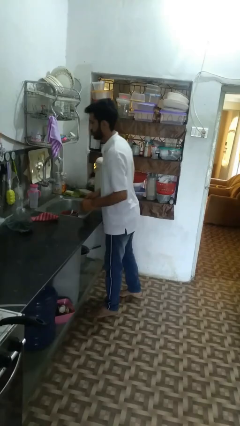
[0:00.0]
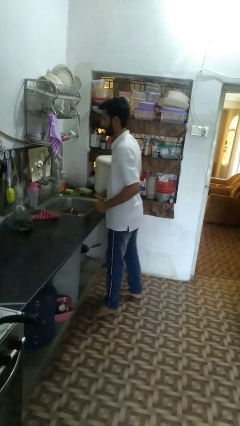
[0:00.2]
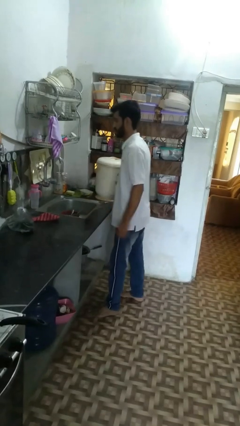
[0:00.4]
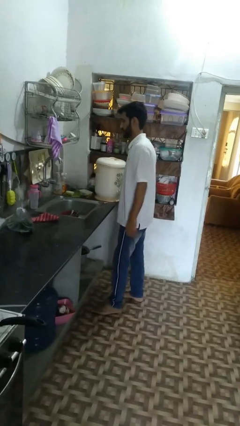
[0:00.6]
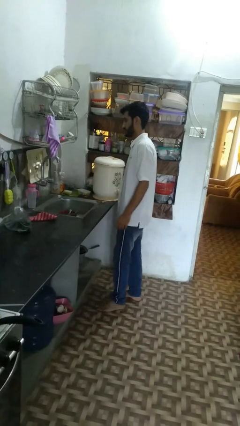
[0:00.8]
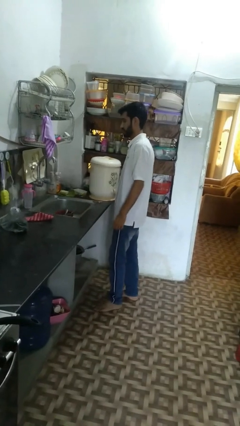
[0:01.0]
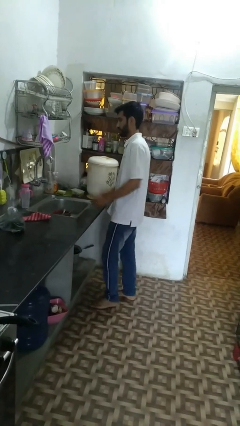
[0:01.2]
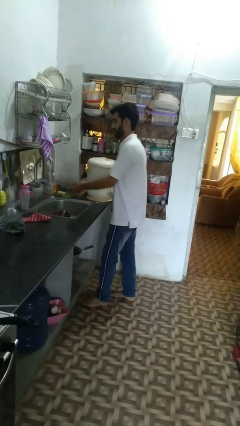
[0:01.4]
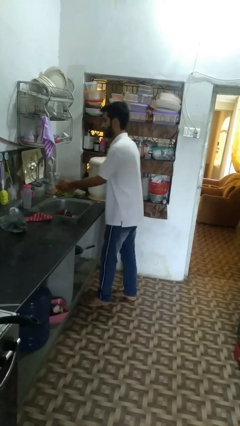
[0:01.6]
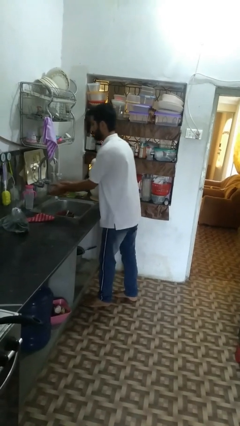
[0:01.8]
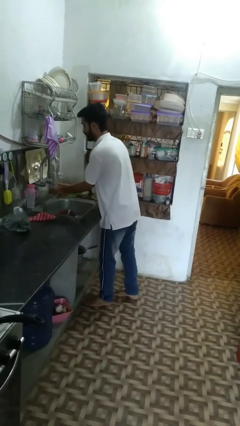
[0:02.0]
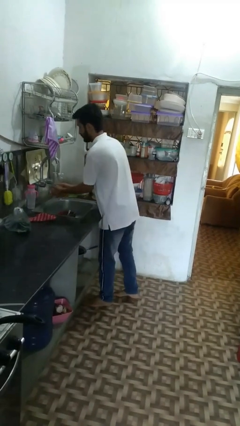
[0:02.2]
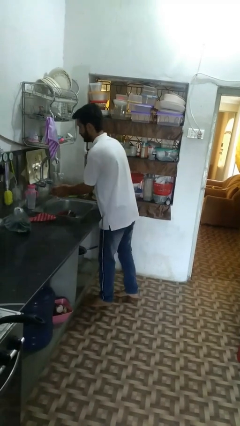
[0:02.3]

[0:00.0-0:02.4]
person washes hands

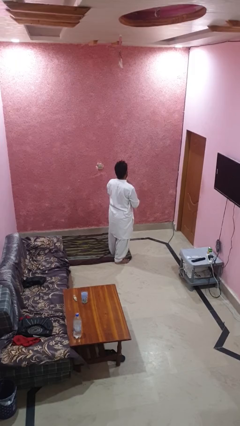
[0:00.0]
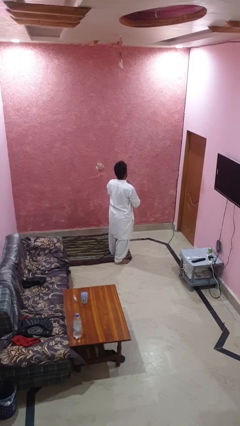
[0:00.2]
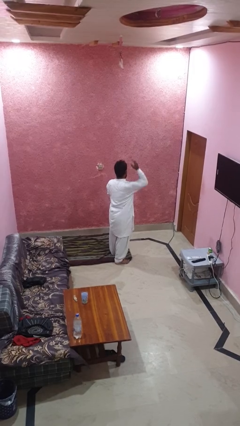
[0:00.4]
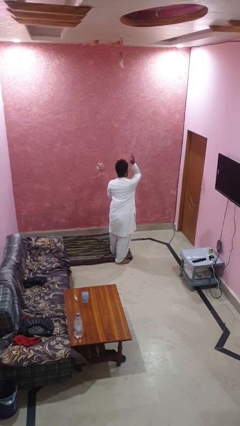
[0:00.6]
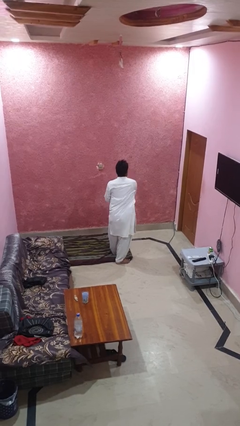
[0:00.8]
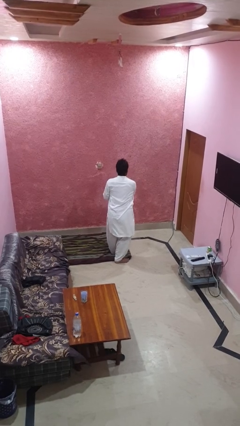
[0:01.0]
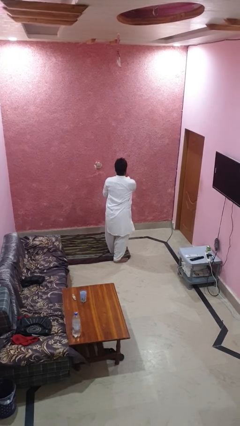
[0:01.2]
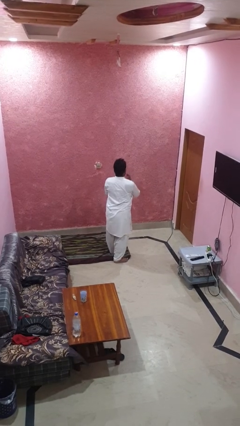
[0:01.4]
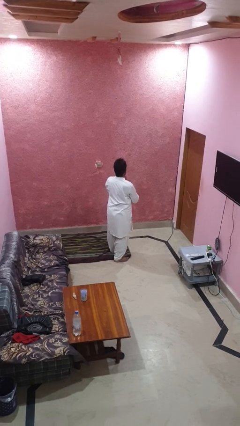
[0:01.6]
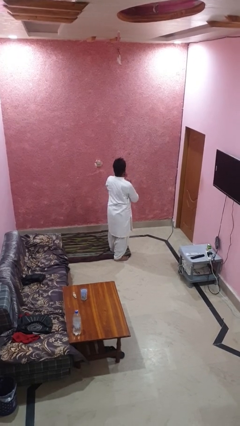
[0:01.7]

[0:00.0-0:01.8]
person karate chop

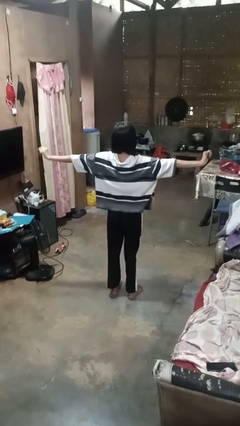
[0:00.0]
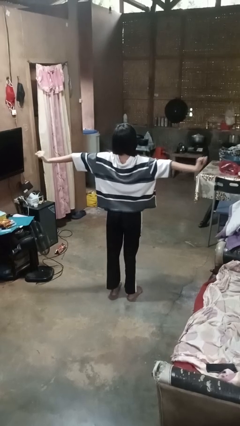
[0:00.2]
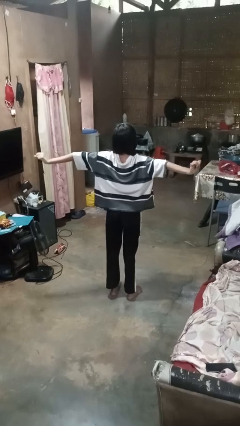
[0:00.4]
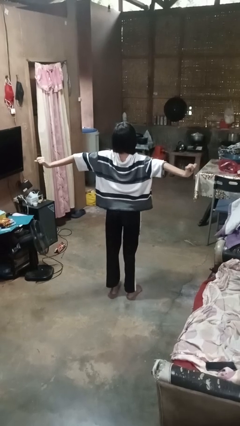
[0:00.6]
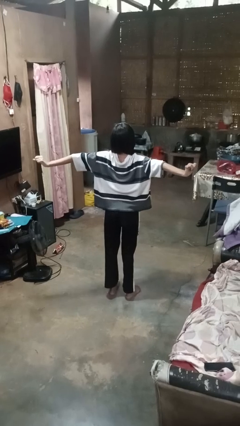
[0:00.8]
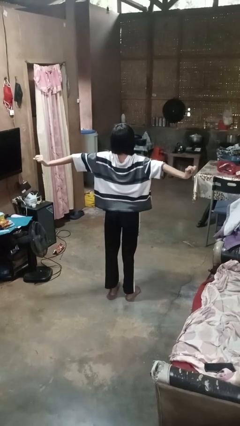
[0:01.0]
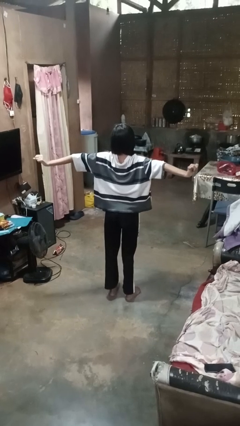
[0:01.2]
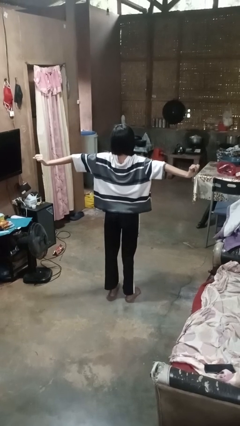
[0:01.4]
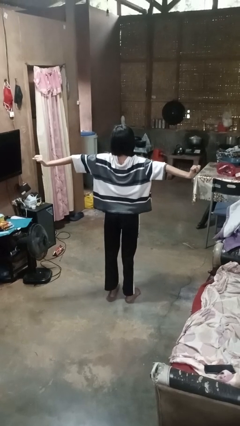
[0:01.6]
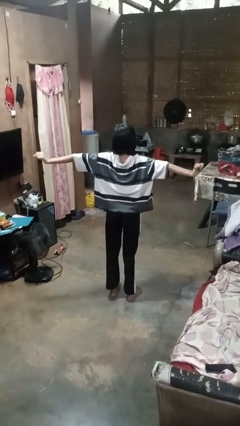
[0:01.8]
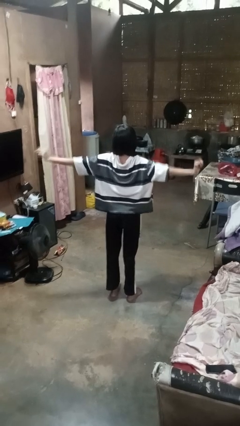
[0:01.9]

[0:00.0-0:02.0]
person stretches arms to side

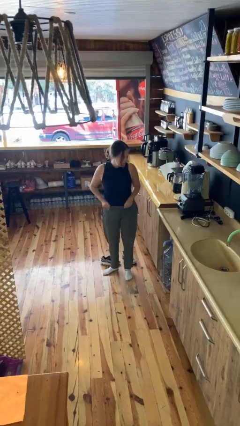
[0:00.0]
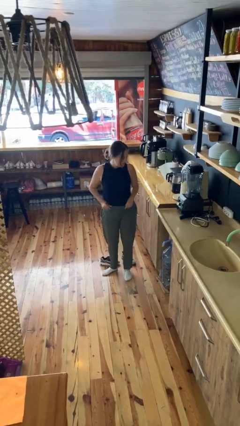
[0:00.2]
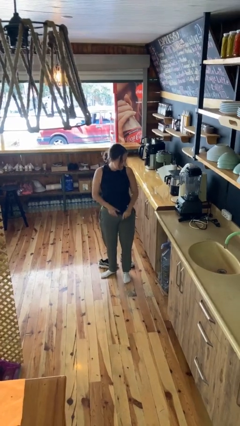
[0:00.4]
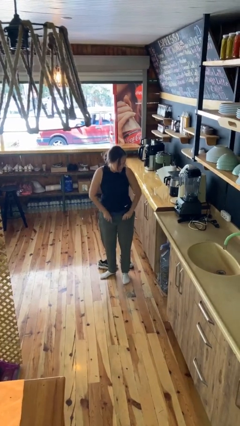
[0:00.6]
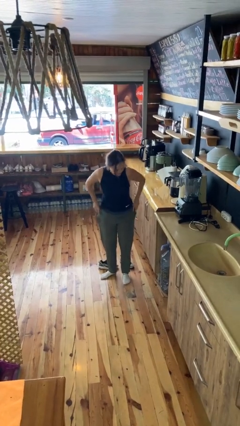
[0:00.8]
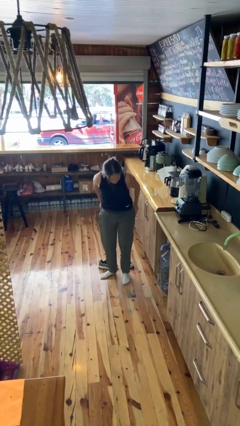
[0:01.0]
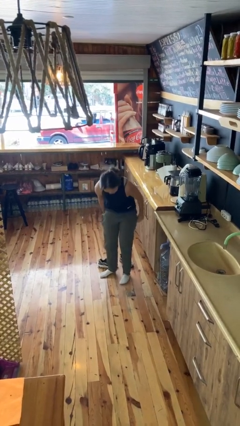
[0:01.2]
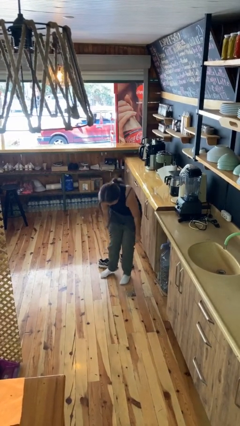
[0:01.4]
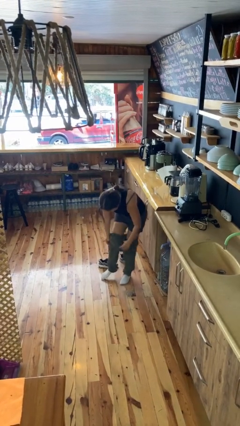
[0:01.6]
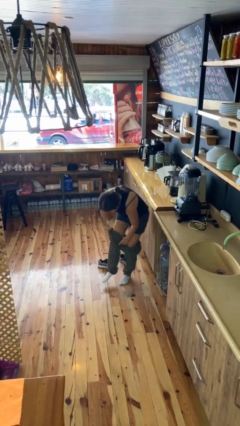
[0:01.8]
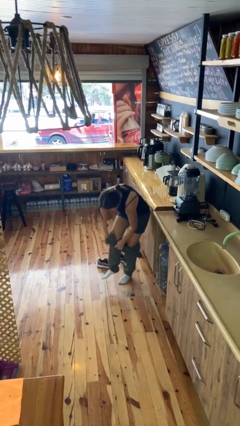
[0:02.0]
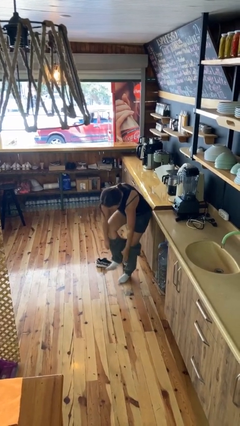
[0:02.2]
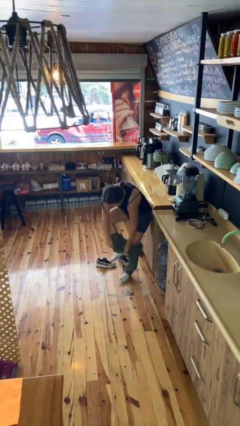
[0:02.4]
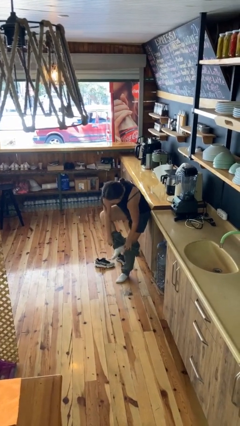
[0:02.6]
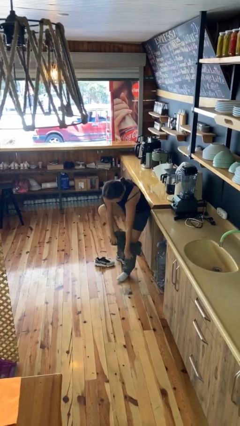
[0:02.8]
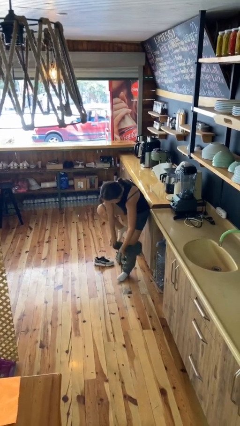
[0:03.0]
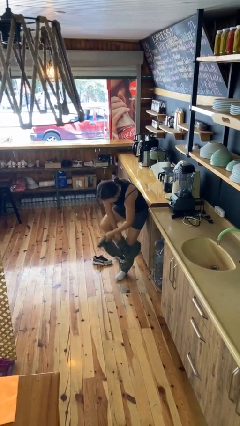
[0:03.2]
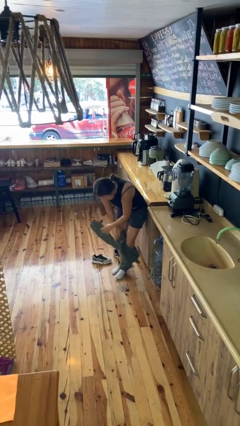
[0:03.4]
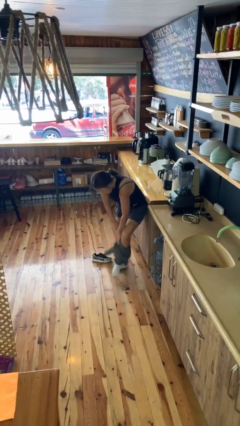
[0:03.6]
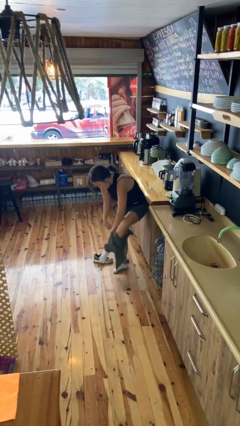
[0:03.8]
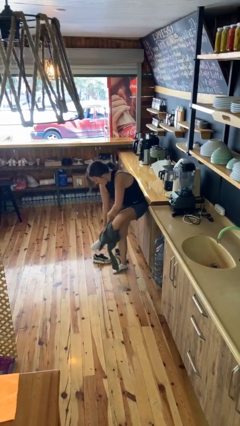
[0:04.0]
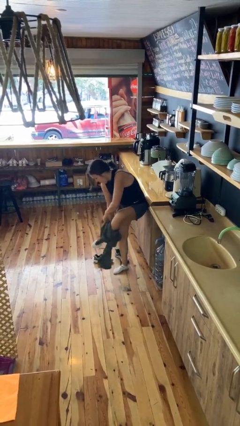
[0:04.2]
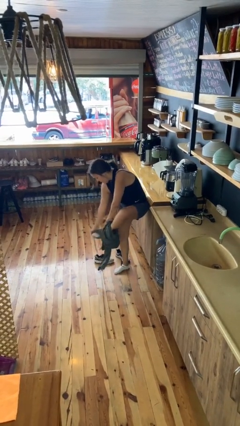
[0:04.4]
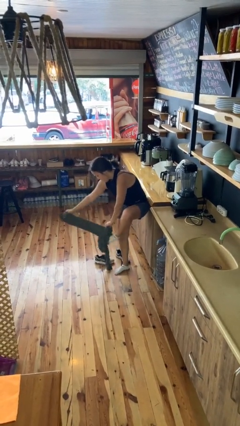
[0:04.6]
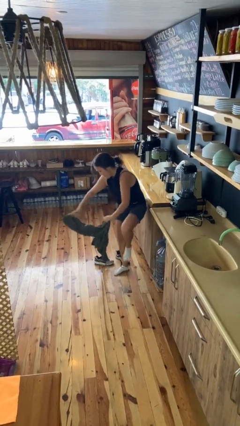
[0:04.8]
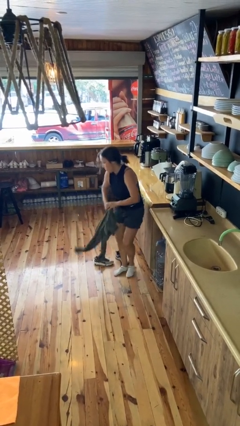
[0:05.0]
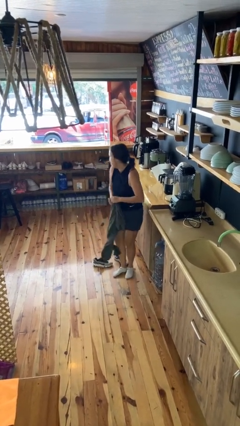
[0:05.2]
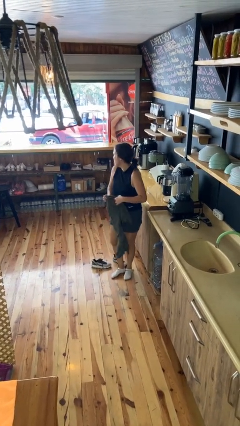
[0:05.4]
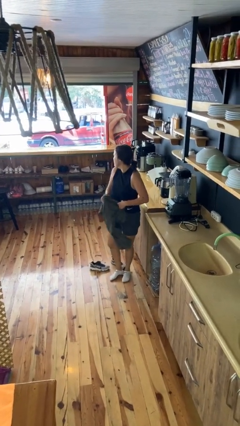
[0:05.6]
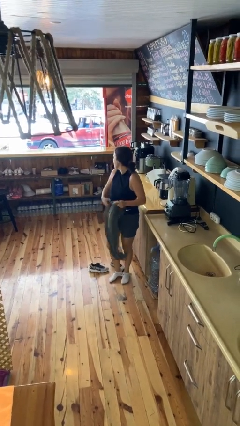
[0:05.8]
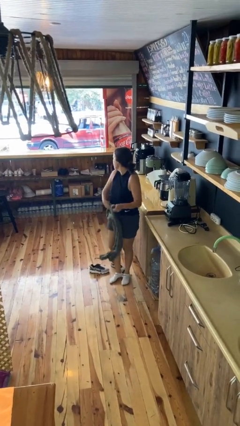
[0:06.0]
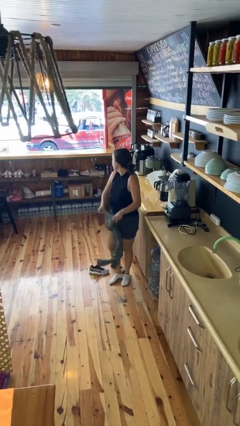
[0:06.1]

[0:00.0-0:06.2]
person takes off pants

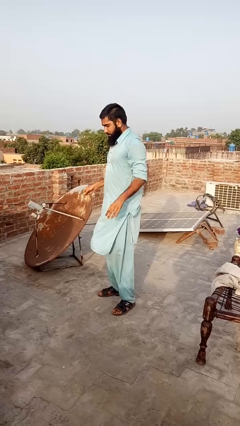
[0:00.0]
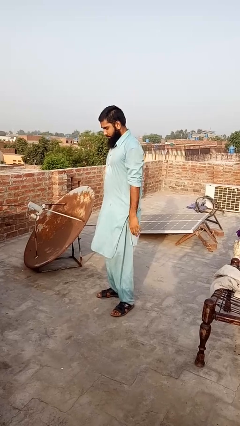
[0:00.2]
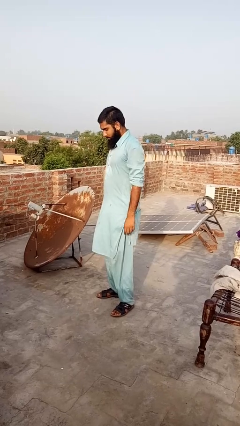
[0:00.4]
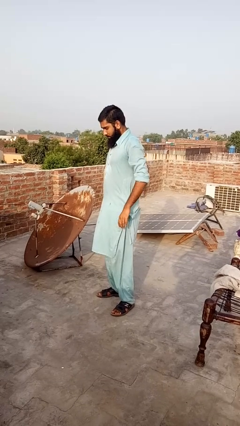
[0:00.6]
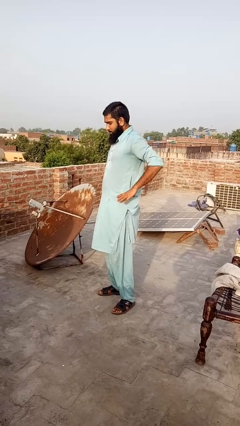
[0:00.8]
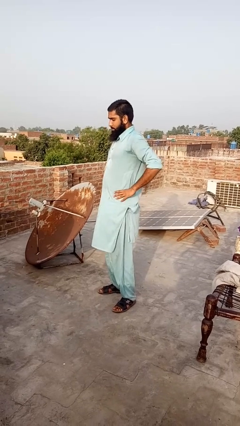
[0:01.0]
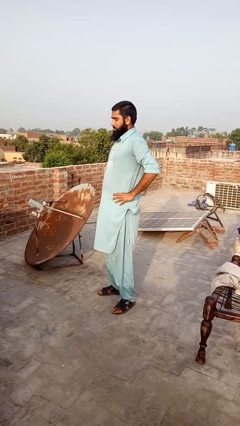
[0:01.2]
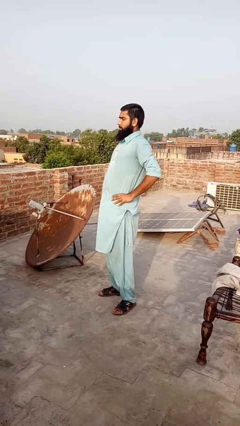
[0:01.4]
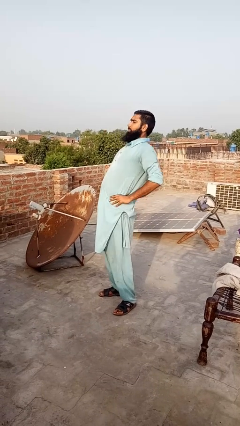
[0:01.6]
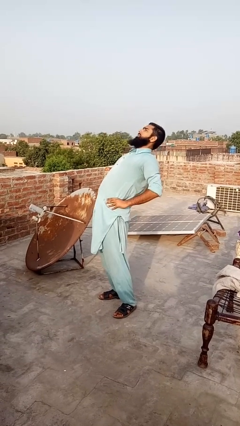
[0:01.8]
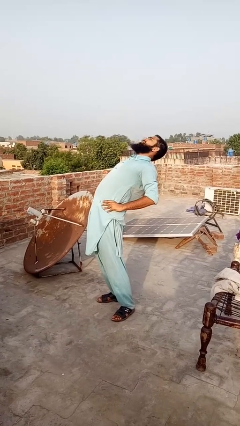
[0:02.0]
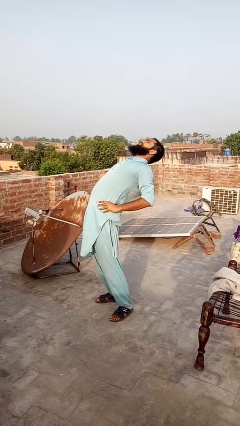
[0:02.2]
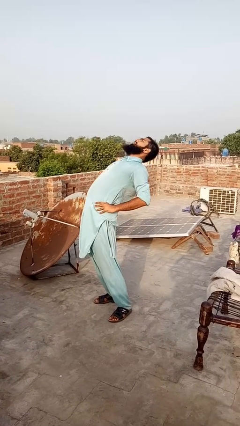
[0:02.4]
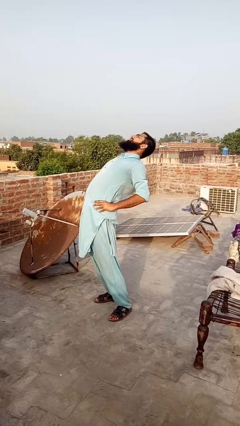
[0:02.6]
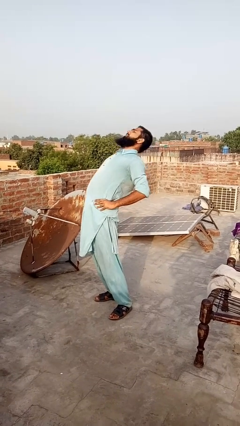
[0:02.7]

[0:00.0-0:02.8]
person stretches back

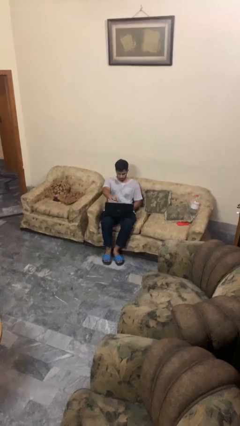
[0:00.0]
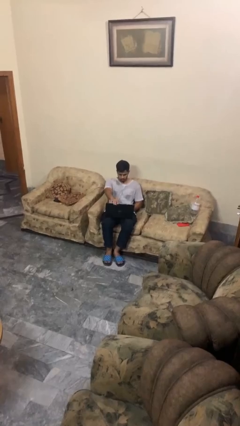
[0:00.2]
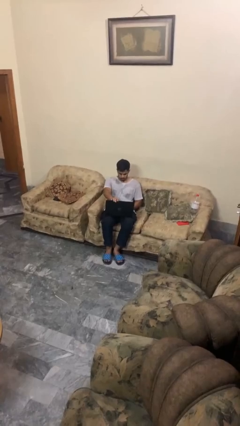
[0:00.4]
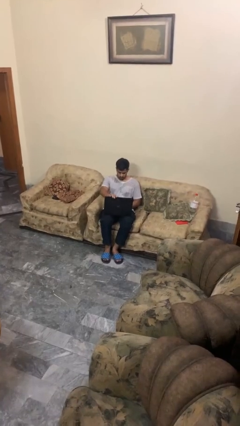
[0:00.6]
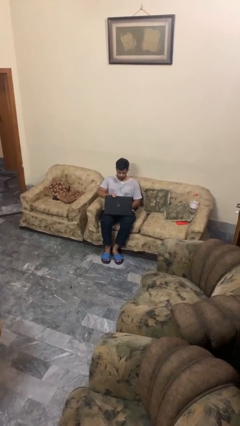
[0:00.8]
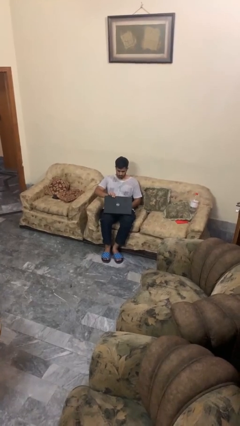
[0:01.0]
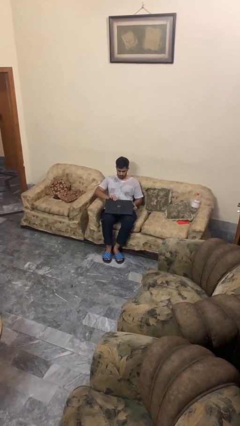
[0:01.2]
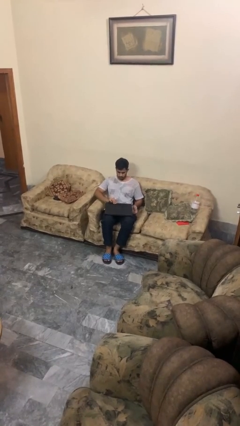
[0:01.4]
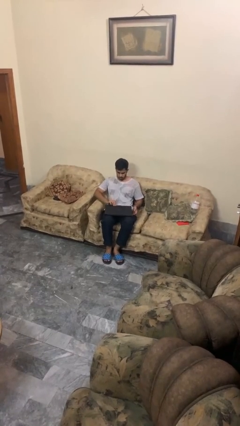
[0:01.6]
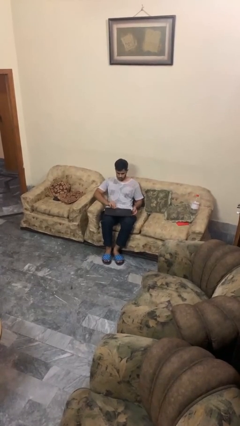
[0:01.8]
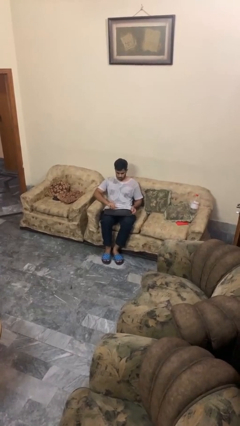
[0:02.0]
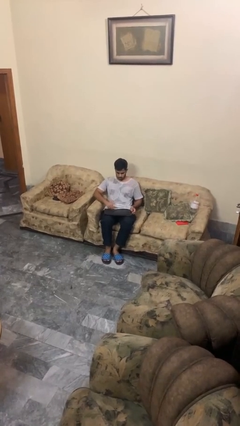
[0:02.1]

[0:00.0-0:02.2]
person closes laptop

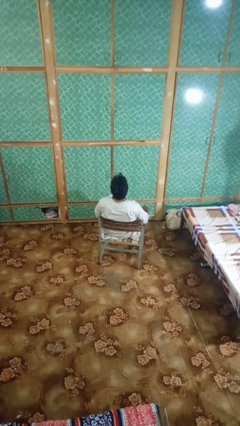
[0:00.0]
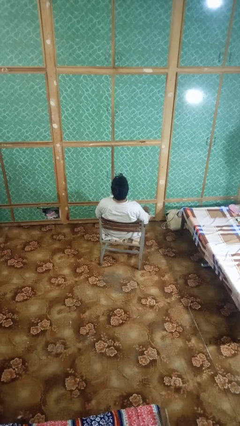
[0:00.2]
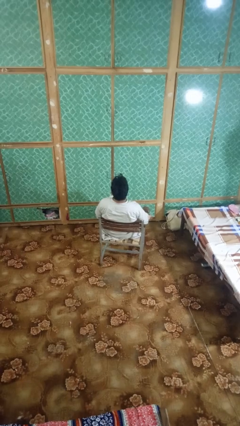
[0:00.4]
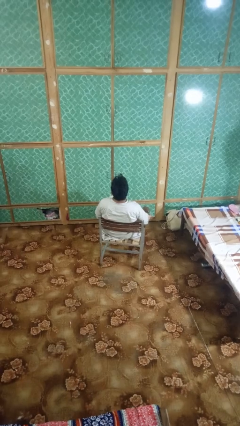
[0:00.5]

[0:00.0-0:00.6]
person rubs neck
